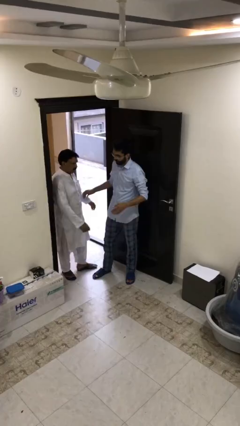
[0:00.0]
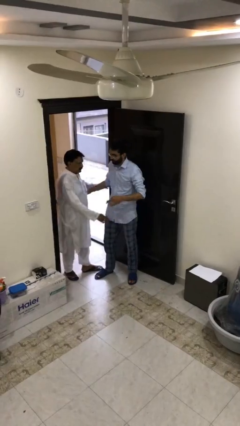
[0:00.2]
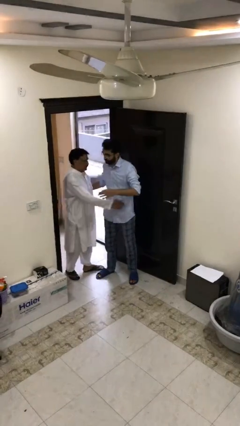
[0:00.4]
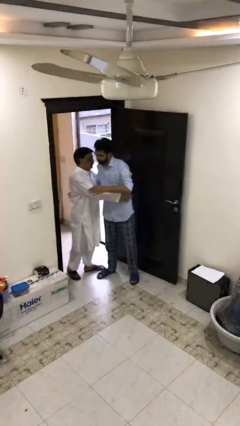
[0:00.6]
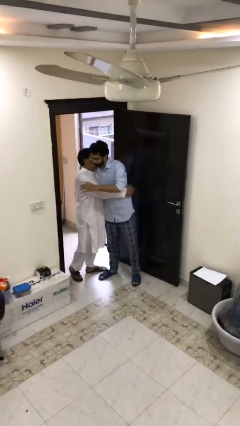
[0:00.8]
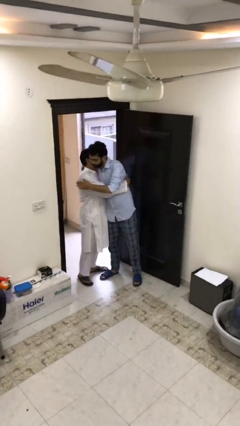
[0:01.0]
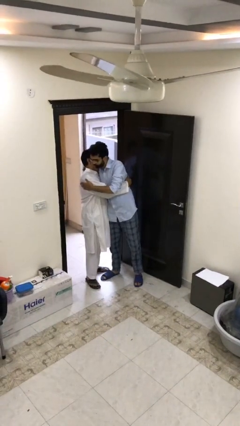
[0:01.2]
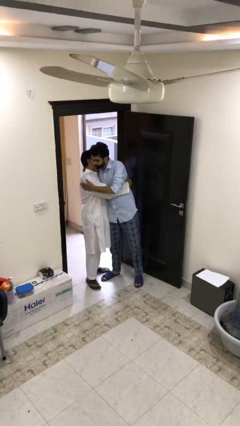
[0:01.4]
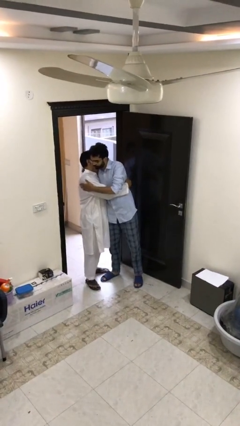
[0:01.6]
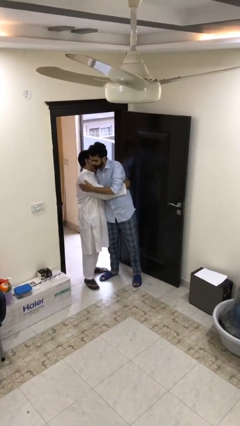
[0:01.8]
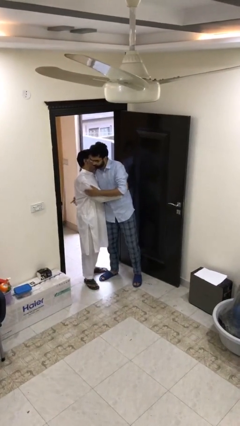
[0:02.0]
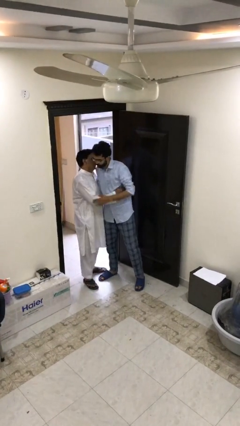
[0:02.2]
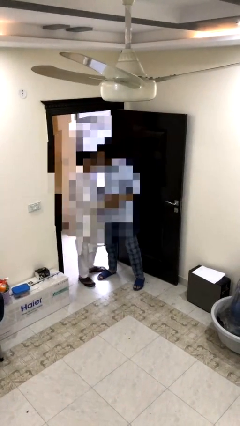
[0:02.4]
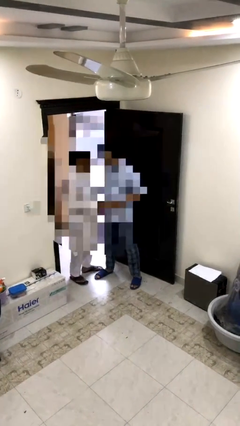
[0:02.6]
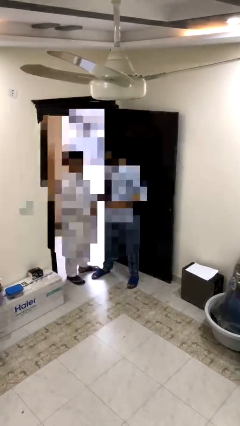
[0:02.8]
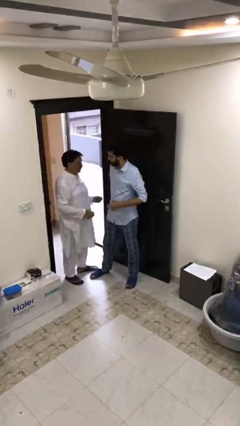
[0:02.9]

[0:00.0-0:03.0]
person embraces person

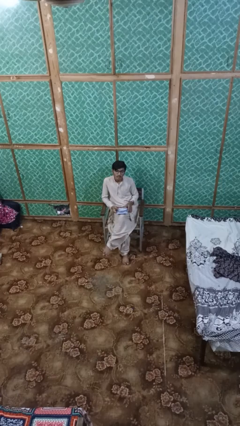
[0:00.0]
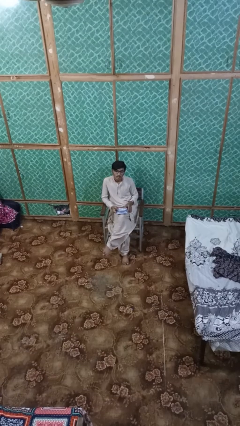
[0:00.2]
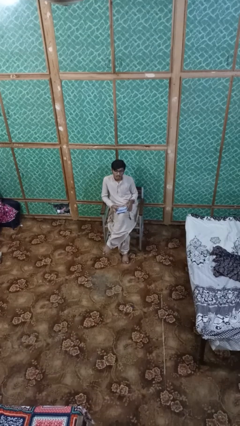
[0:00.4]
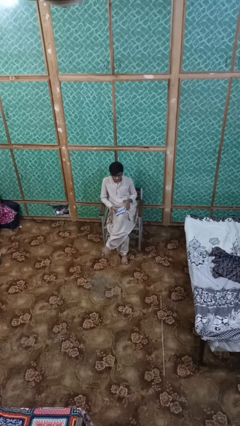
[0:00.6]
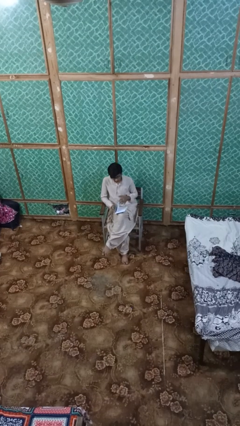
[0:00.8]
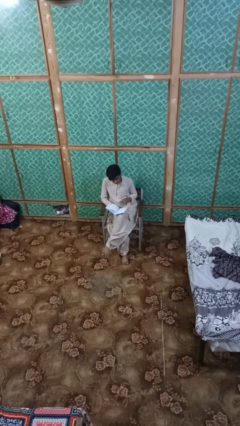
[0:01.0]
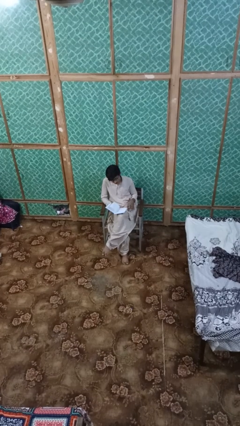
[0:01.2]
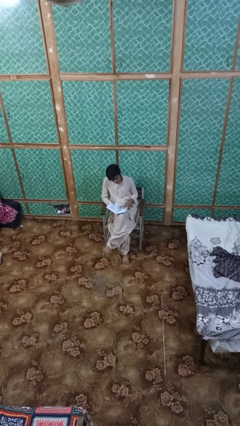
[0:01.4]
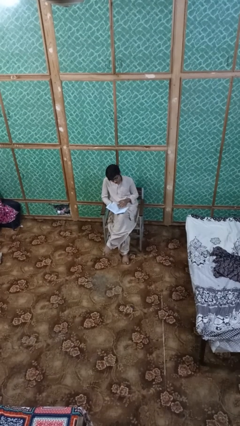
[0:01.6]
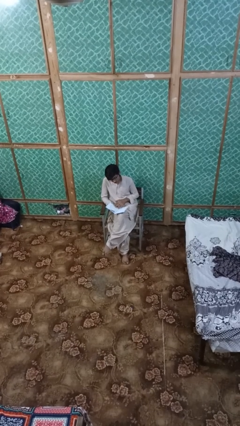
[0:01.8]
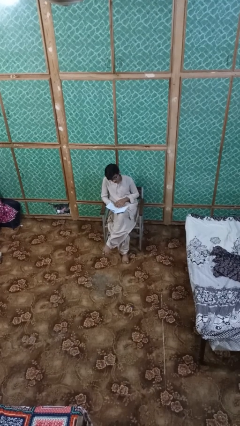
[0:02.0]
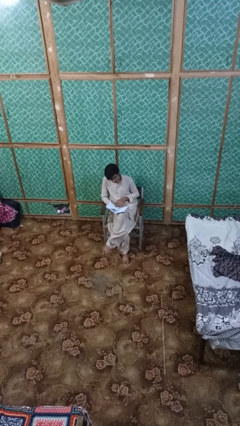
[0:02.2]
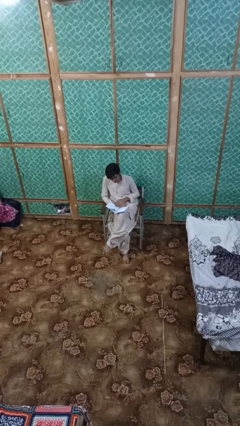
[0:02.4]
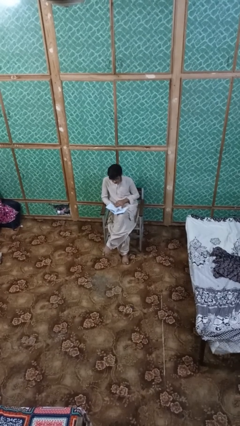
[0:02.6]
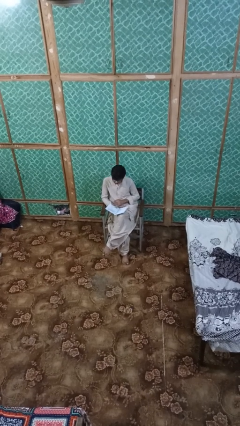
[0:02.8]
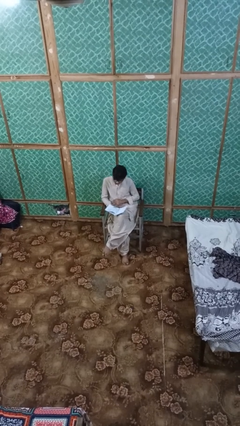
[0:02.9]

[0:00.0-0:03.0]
person reads magazine

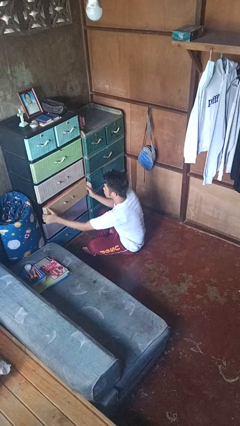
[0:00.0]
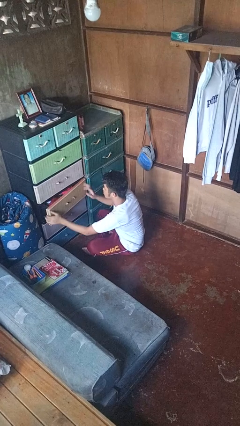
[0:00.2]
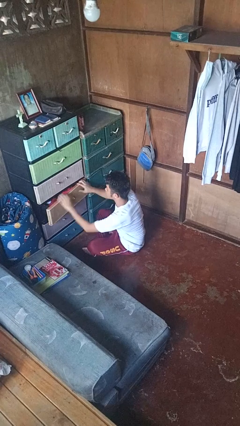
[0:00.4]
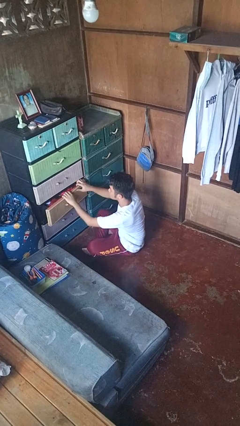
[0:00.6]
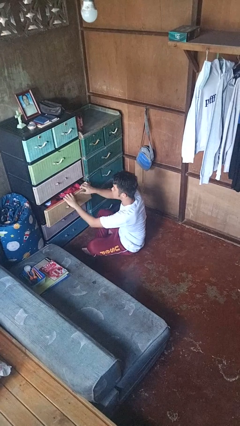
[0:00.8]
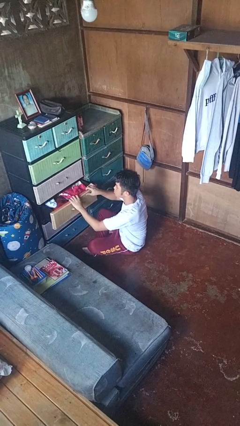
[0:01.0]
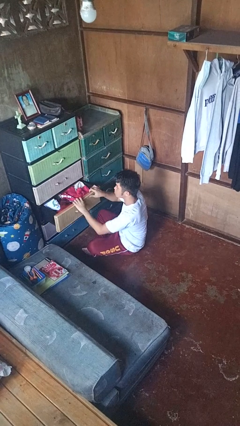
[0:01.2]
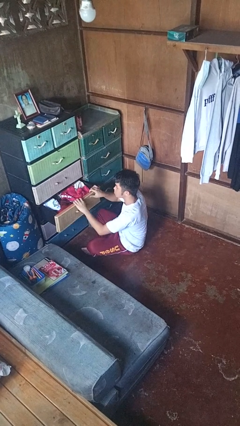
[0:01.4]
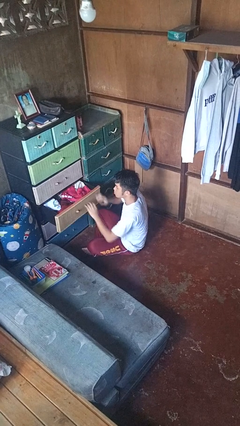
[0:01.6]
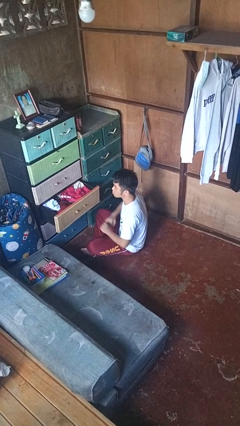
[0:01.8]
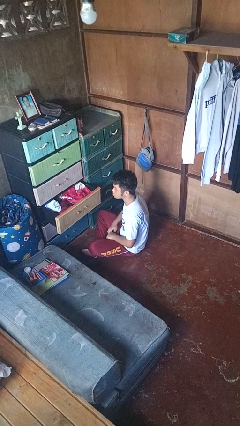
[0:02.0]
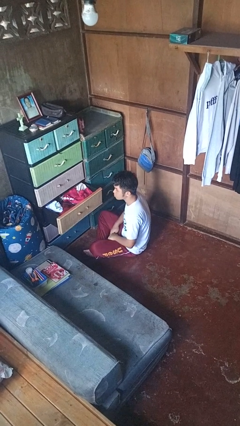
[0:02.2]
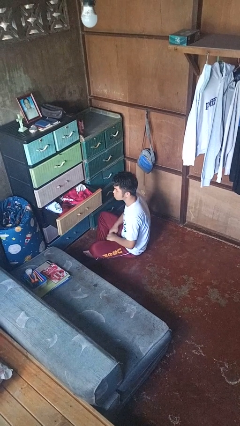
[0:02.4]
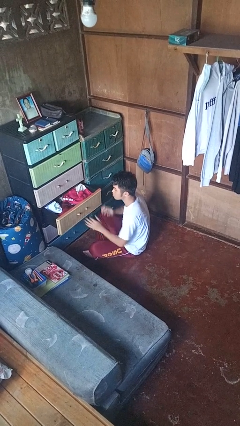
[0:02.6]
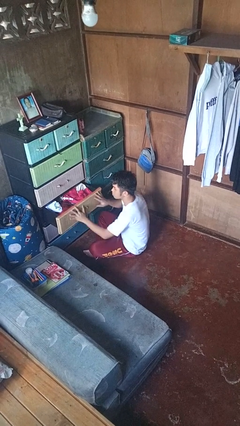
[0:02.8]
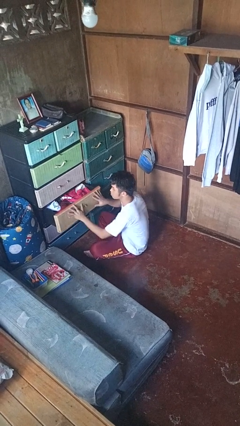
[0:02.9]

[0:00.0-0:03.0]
person opens dresser drawer

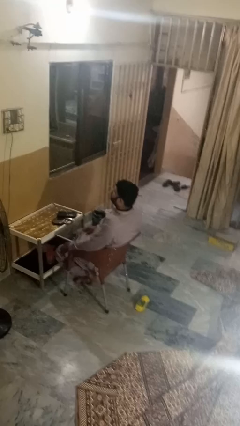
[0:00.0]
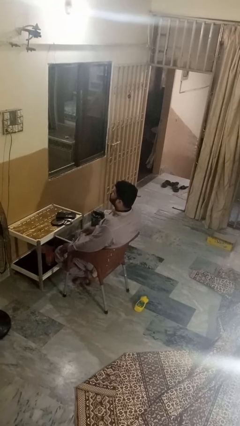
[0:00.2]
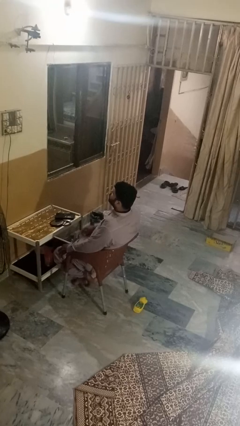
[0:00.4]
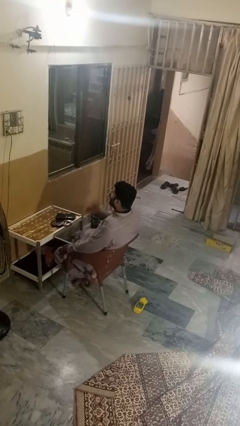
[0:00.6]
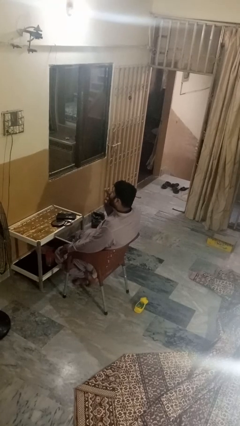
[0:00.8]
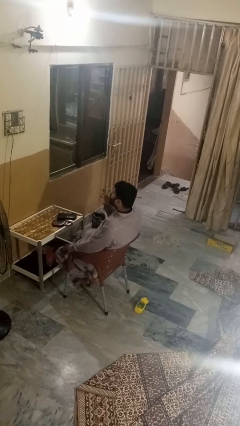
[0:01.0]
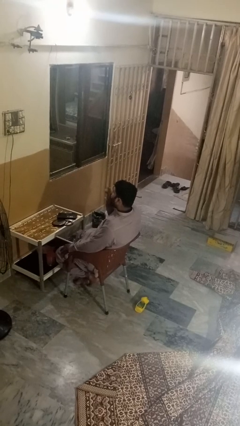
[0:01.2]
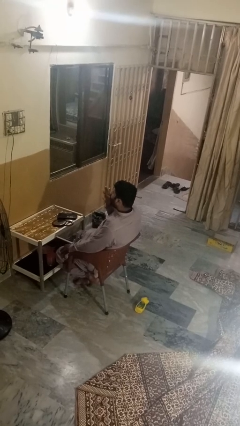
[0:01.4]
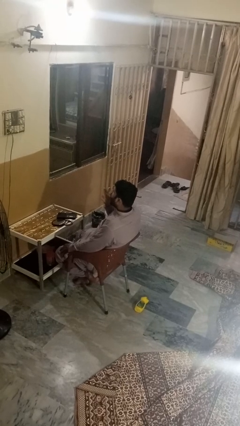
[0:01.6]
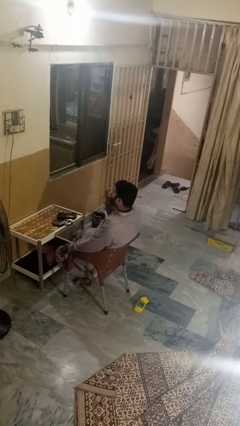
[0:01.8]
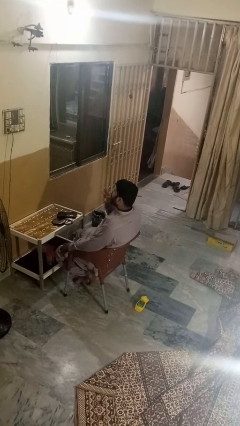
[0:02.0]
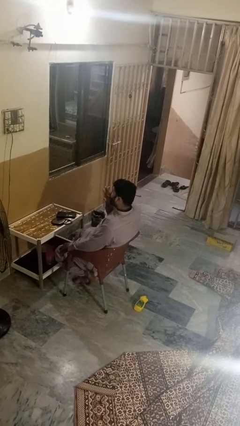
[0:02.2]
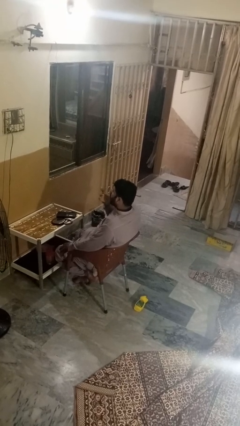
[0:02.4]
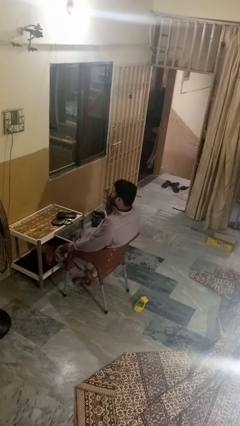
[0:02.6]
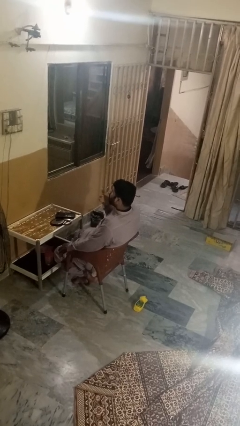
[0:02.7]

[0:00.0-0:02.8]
person licks fingers

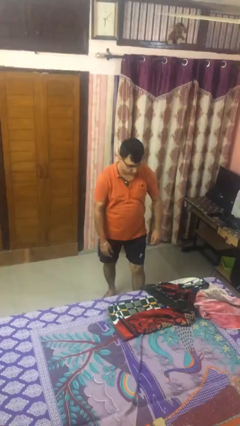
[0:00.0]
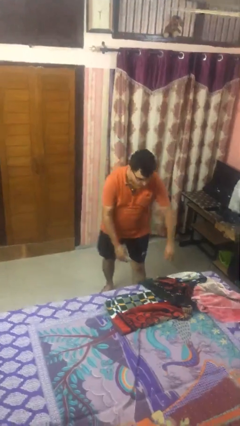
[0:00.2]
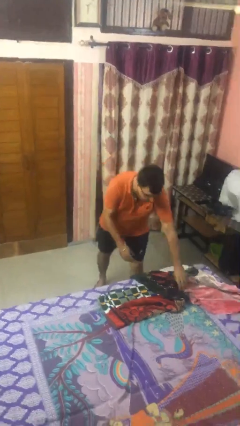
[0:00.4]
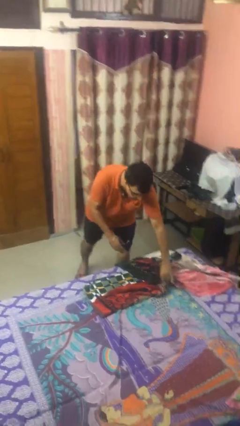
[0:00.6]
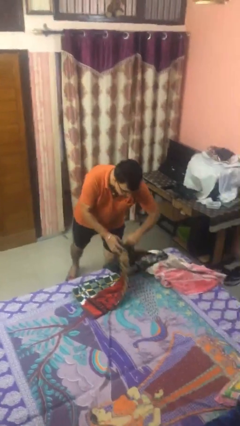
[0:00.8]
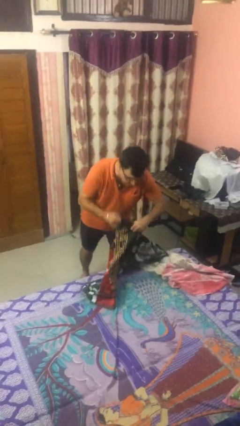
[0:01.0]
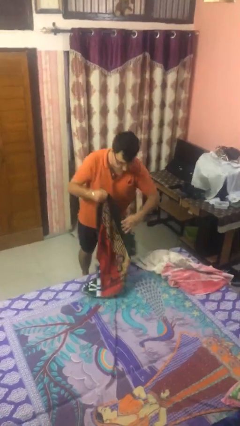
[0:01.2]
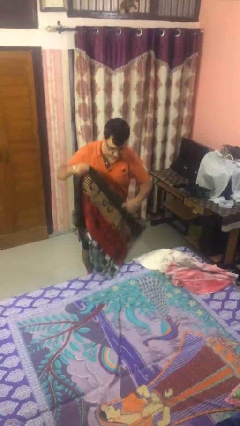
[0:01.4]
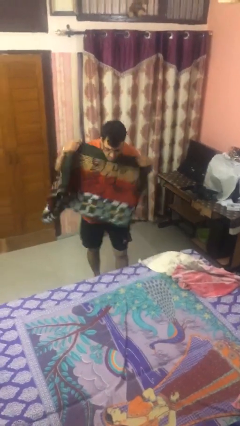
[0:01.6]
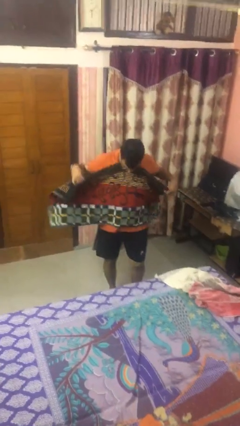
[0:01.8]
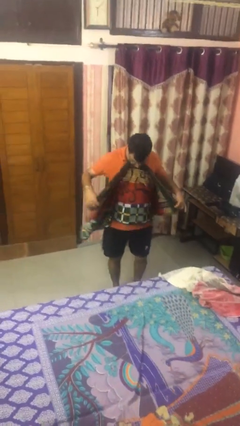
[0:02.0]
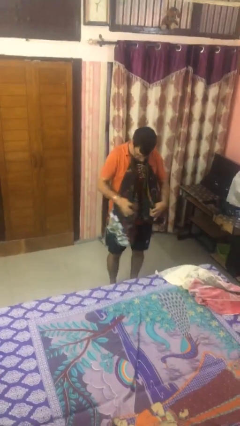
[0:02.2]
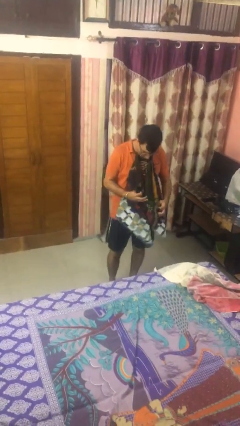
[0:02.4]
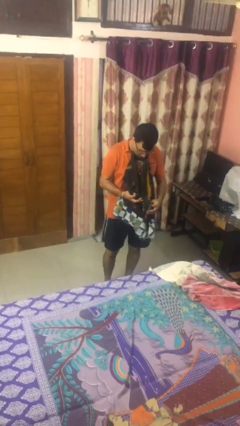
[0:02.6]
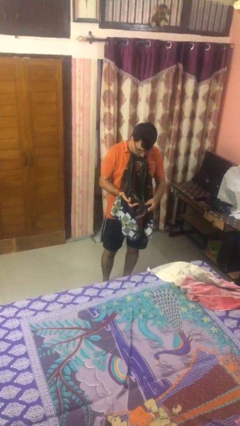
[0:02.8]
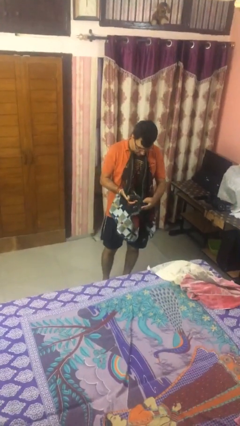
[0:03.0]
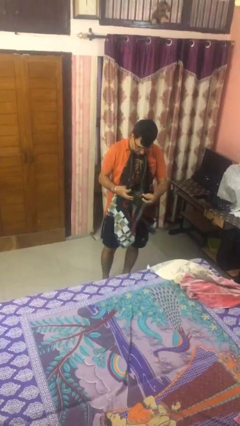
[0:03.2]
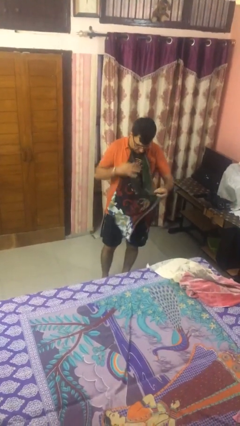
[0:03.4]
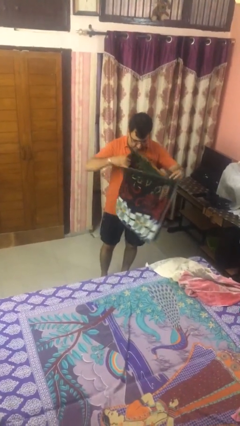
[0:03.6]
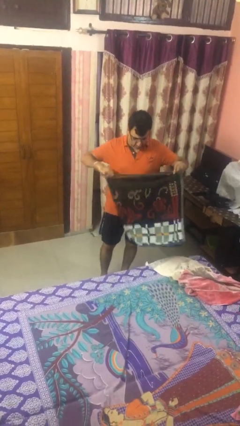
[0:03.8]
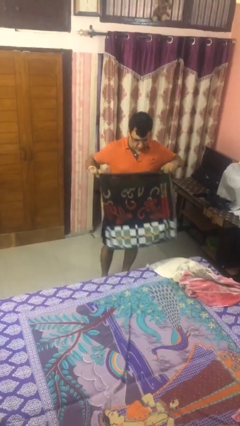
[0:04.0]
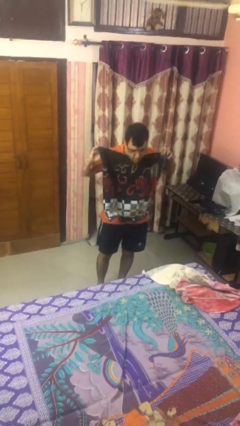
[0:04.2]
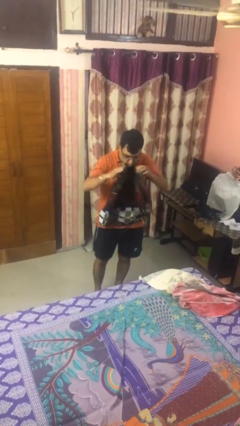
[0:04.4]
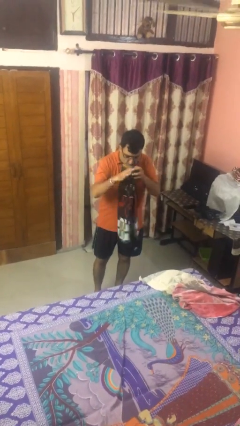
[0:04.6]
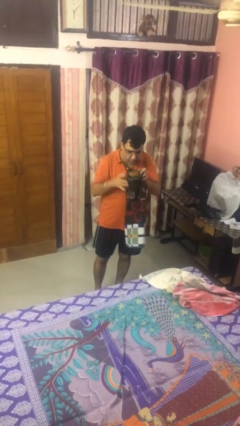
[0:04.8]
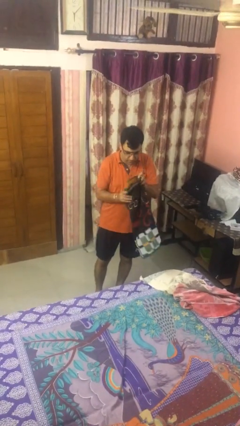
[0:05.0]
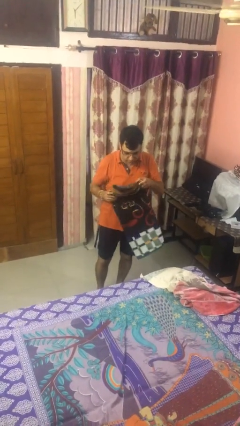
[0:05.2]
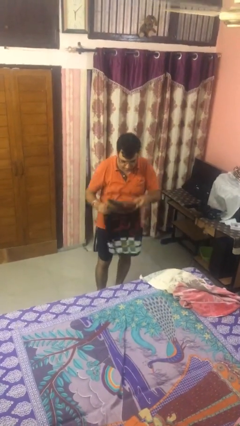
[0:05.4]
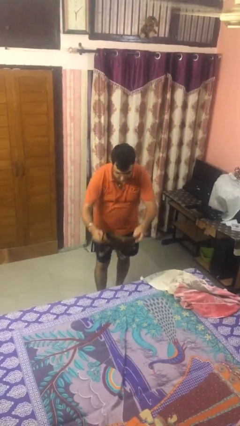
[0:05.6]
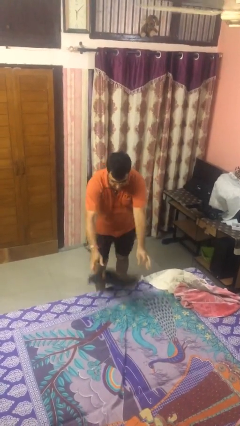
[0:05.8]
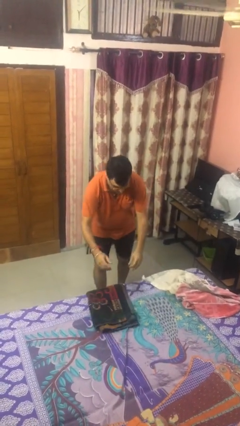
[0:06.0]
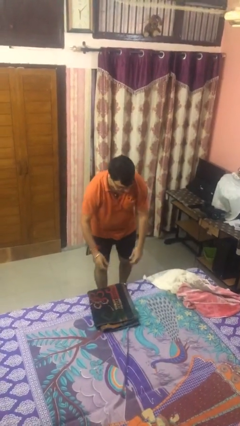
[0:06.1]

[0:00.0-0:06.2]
person folds towel
